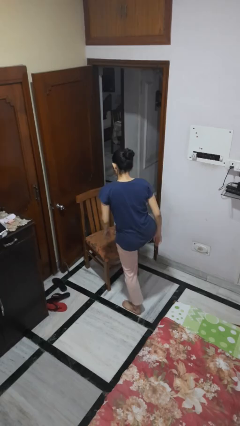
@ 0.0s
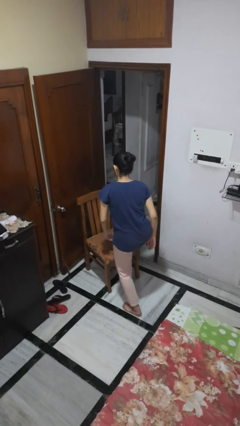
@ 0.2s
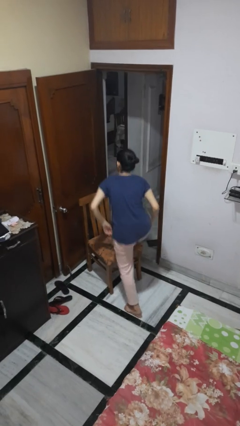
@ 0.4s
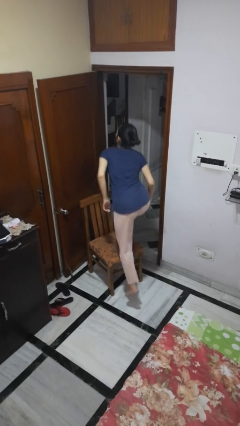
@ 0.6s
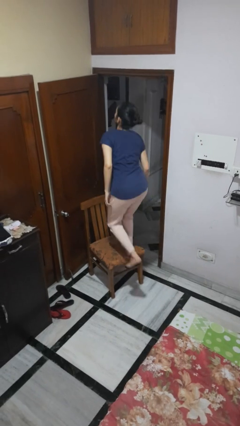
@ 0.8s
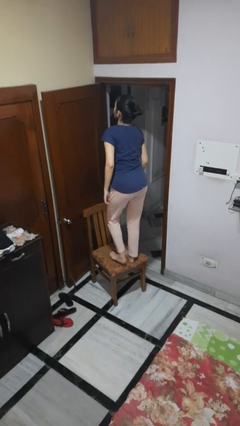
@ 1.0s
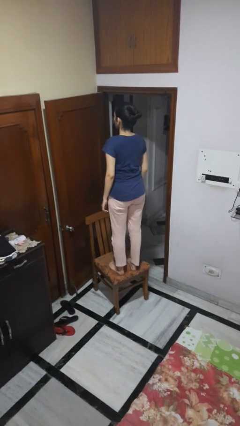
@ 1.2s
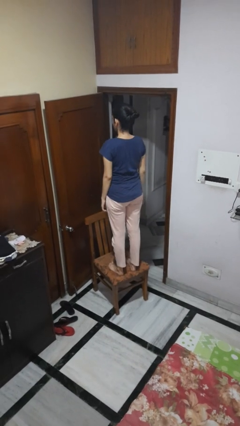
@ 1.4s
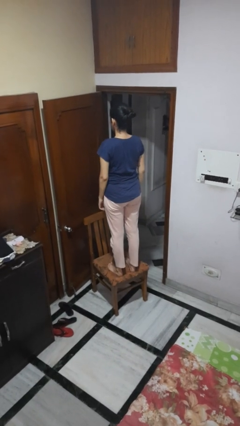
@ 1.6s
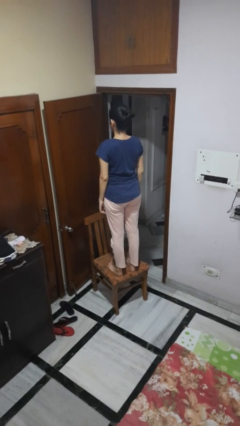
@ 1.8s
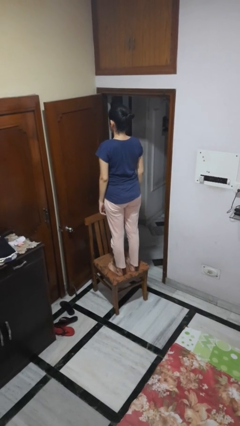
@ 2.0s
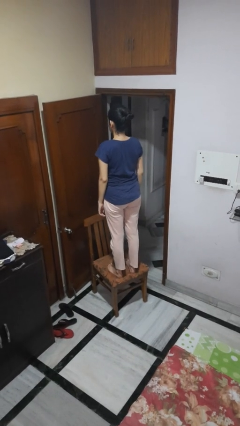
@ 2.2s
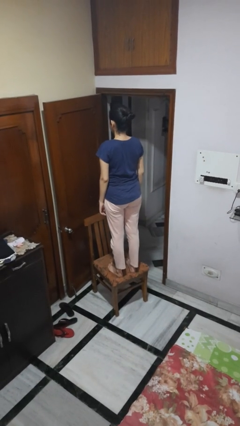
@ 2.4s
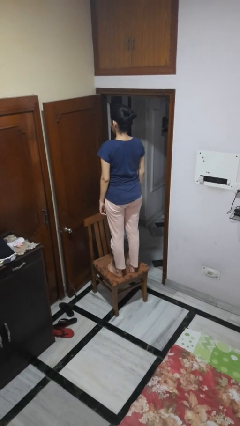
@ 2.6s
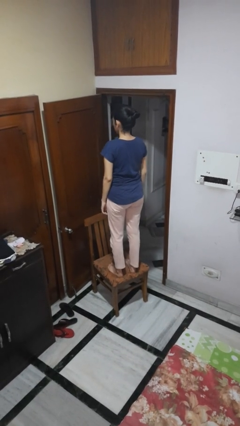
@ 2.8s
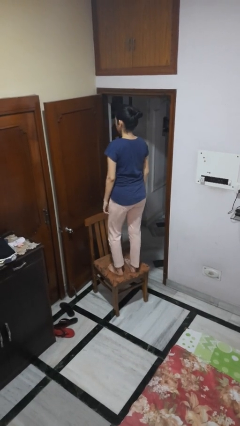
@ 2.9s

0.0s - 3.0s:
person climbs on chair

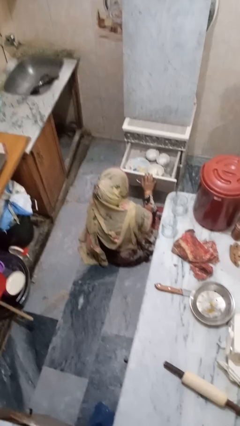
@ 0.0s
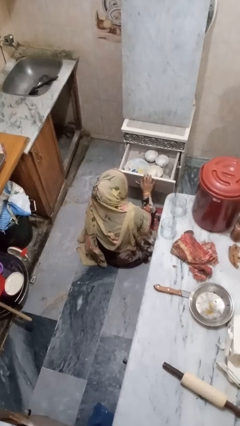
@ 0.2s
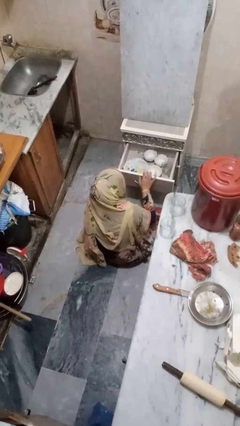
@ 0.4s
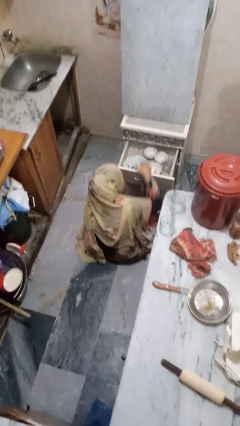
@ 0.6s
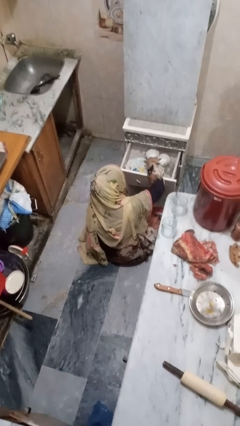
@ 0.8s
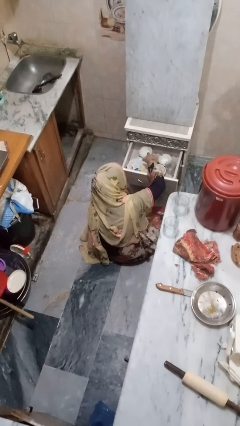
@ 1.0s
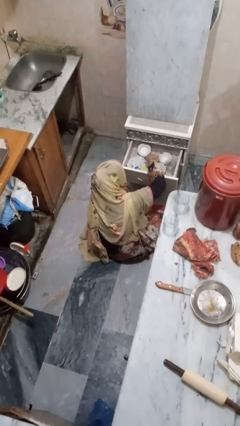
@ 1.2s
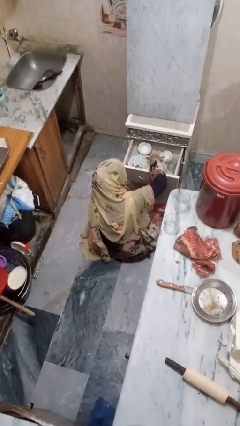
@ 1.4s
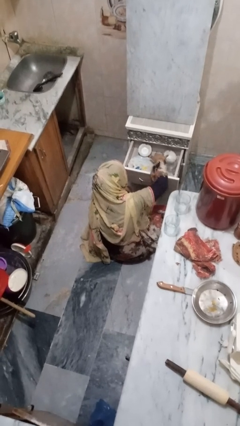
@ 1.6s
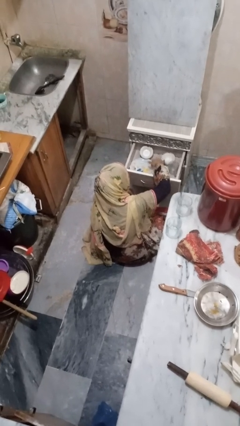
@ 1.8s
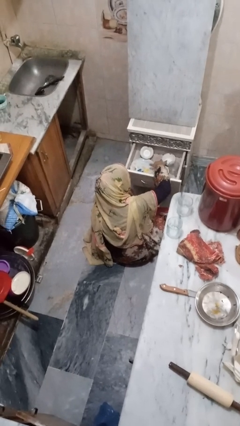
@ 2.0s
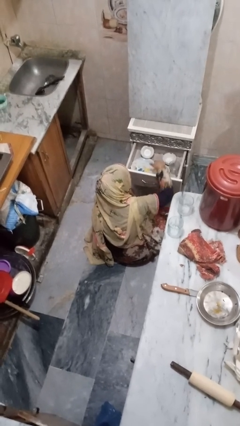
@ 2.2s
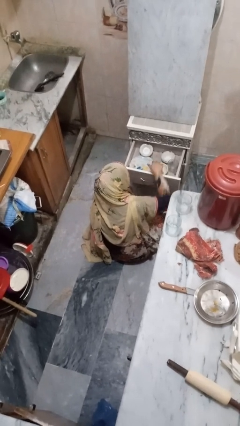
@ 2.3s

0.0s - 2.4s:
person searches in kitchen drawer

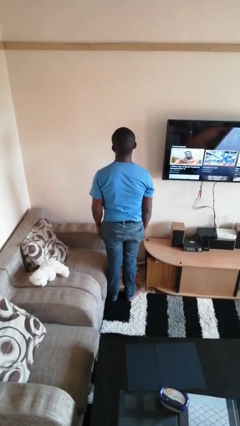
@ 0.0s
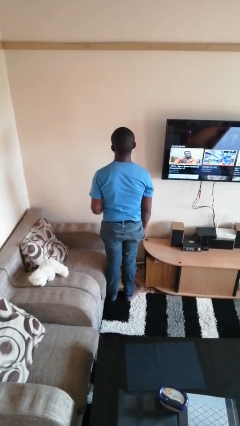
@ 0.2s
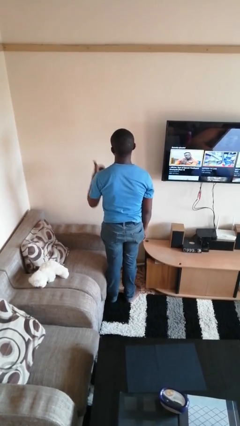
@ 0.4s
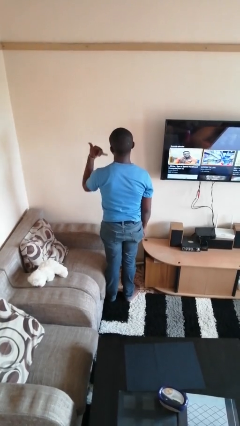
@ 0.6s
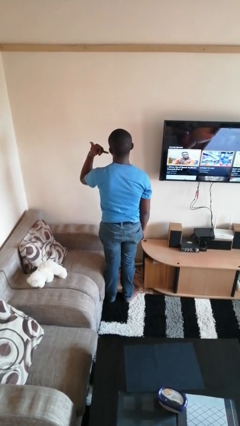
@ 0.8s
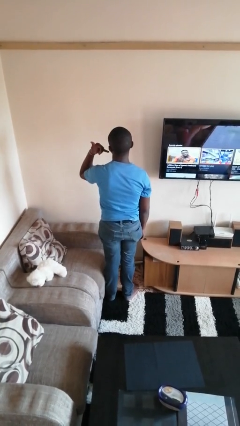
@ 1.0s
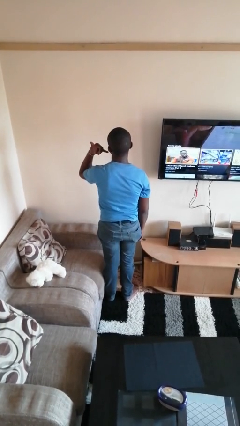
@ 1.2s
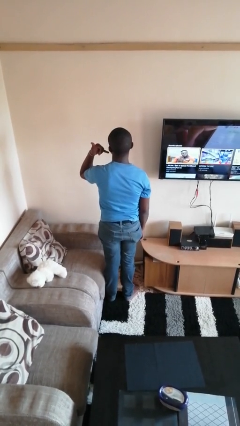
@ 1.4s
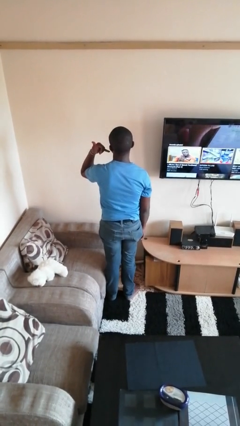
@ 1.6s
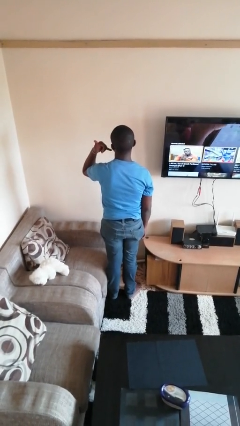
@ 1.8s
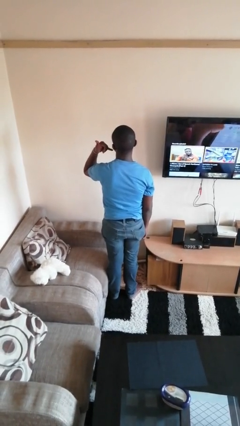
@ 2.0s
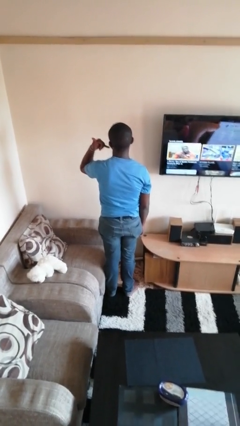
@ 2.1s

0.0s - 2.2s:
person gestures call me

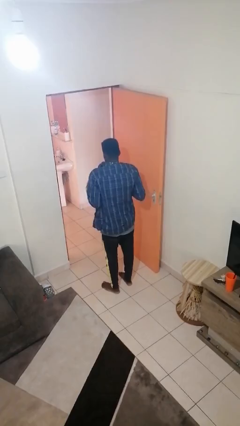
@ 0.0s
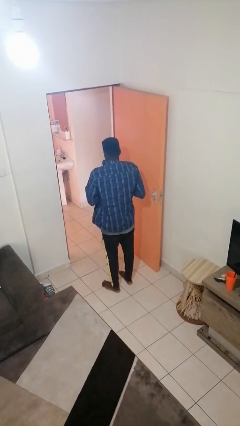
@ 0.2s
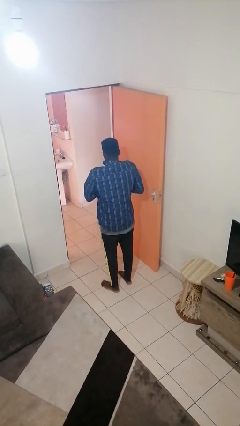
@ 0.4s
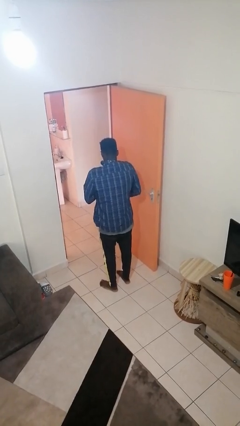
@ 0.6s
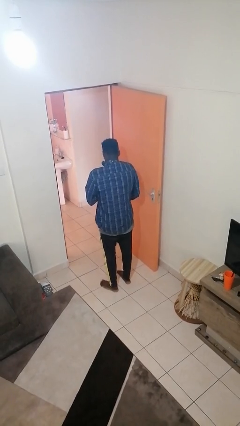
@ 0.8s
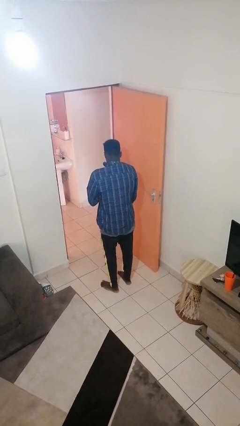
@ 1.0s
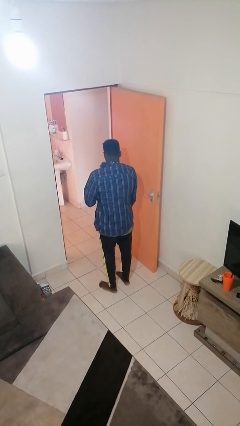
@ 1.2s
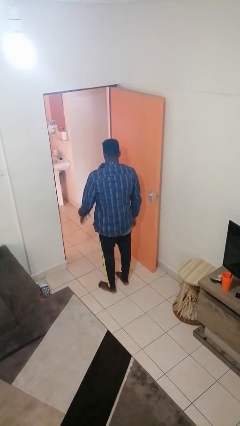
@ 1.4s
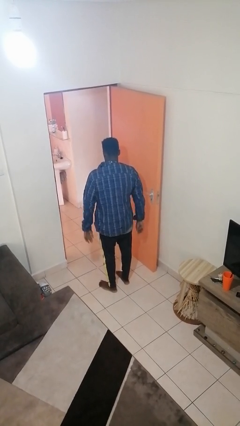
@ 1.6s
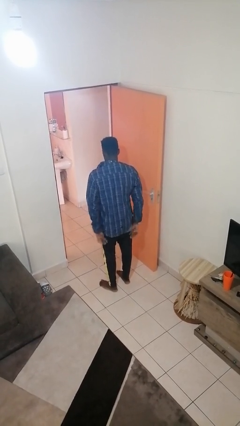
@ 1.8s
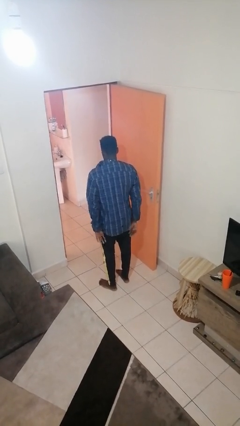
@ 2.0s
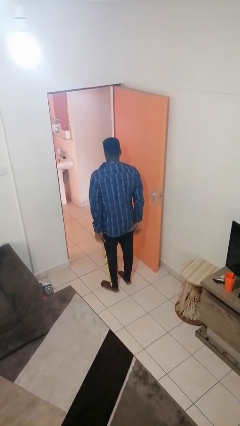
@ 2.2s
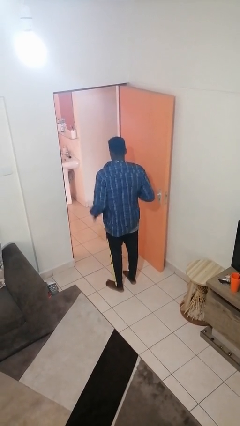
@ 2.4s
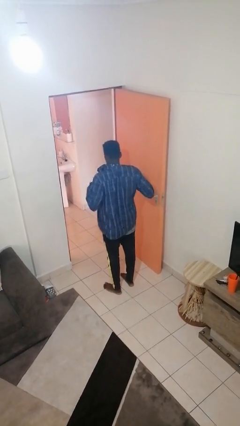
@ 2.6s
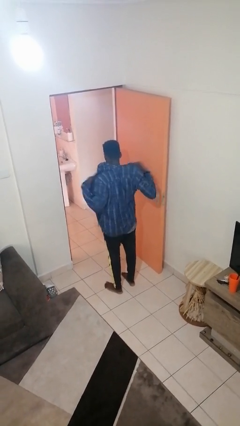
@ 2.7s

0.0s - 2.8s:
person unzips jacket

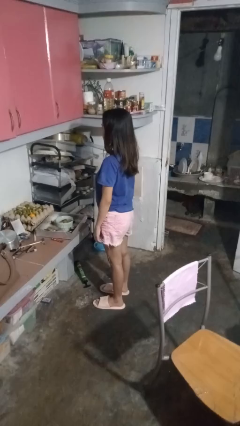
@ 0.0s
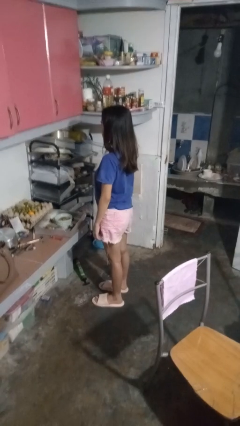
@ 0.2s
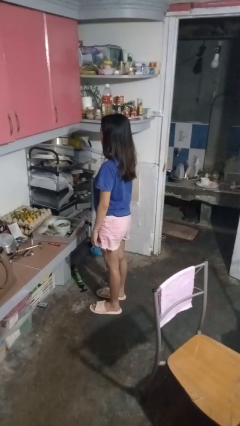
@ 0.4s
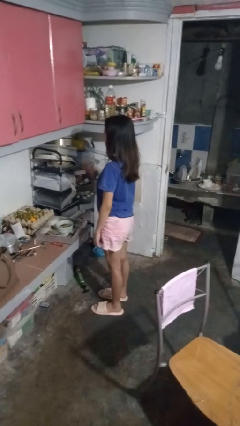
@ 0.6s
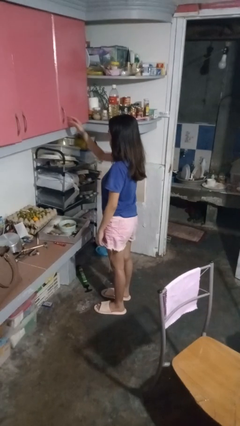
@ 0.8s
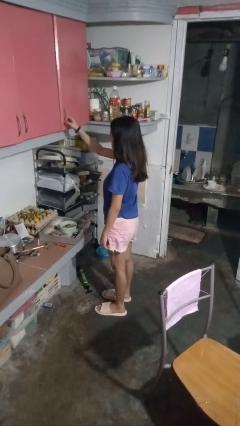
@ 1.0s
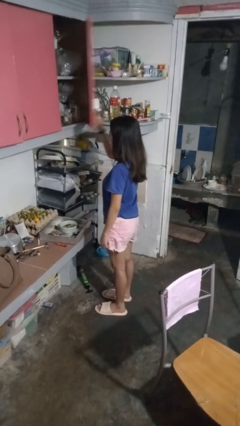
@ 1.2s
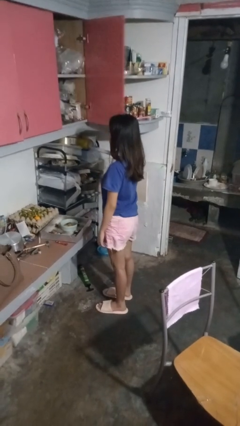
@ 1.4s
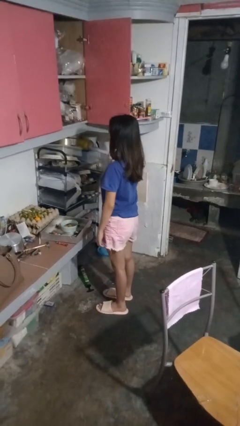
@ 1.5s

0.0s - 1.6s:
person opens cabinet

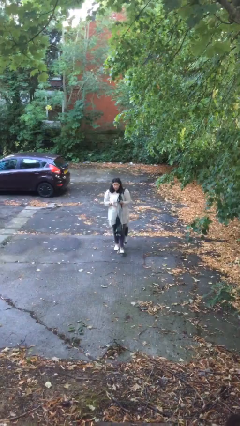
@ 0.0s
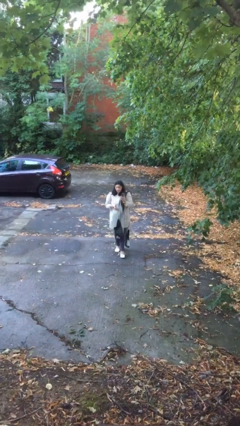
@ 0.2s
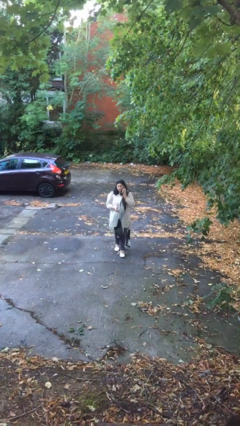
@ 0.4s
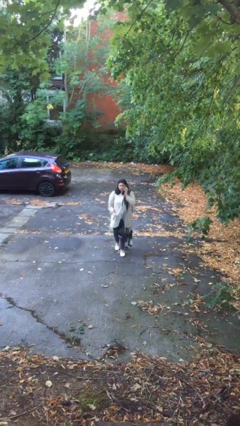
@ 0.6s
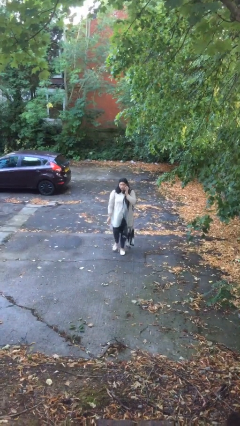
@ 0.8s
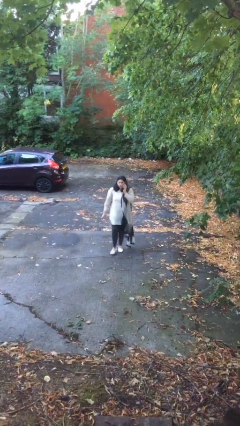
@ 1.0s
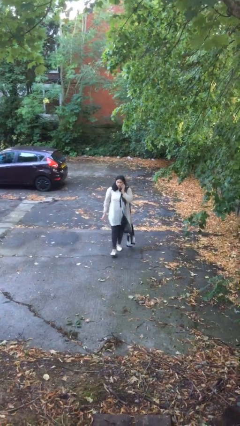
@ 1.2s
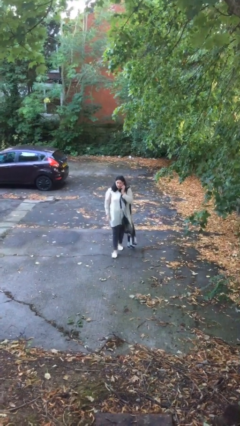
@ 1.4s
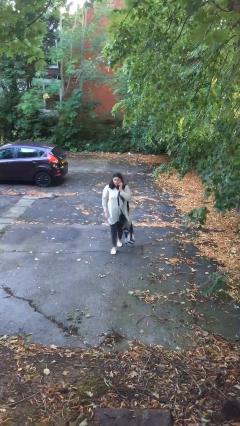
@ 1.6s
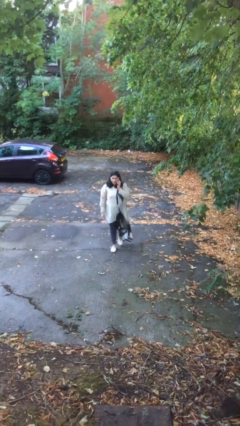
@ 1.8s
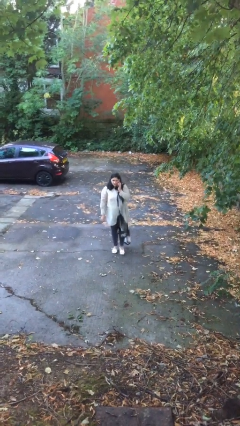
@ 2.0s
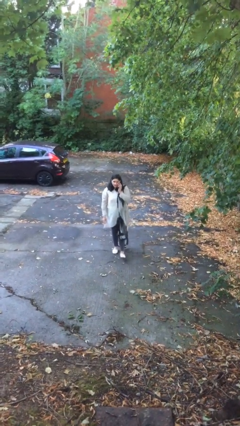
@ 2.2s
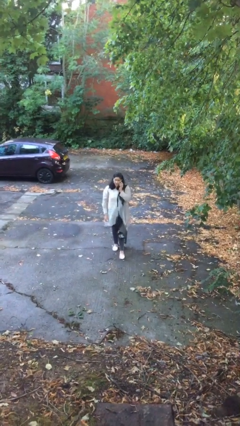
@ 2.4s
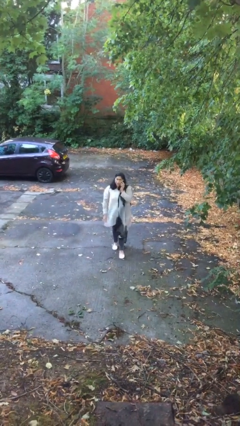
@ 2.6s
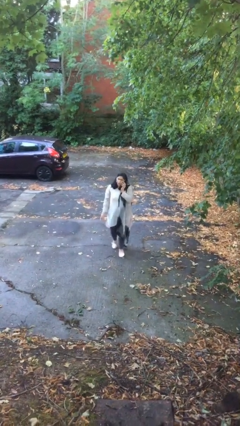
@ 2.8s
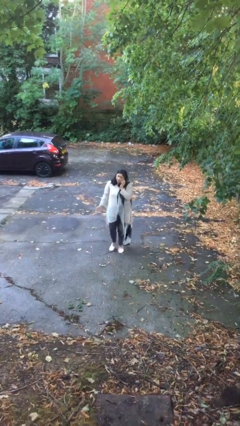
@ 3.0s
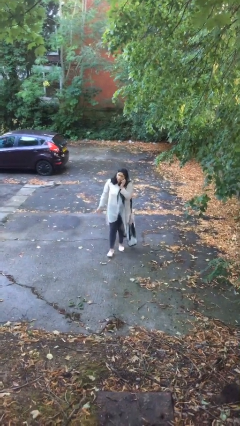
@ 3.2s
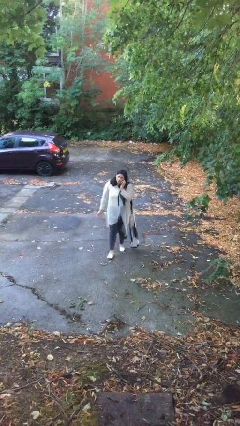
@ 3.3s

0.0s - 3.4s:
person talks on phone

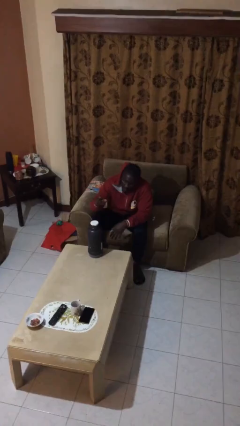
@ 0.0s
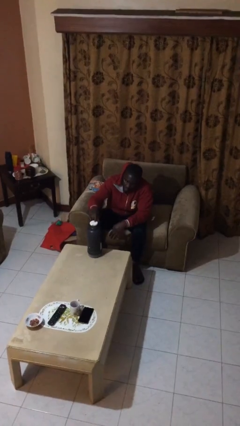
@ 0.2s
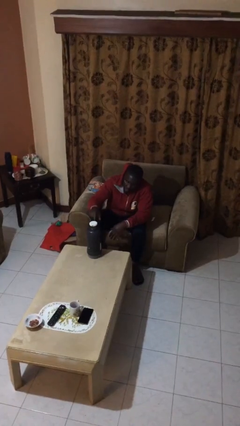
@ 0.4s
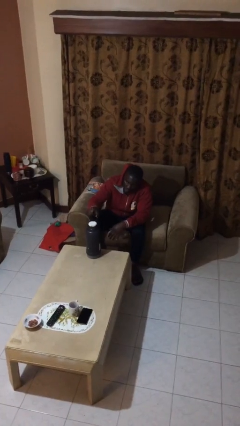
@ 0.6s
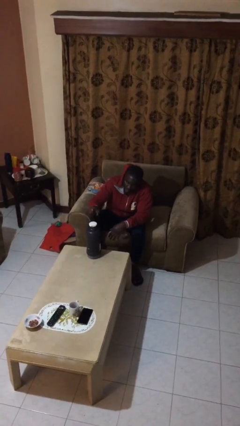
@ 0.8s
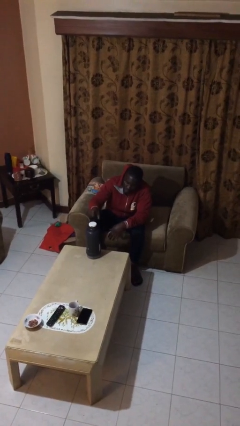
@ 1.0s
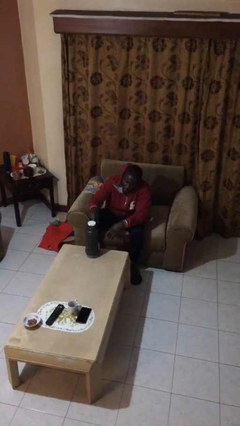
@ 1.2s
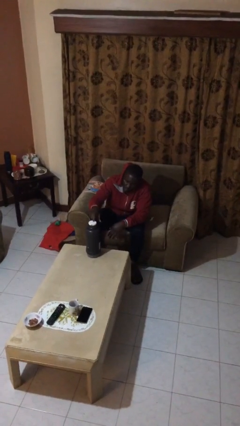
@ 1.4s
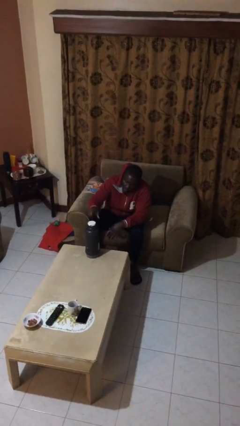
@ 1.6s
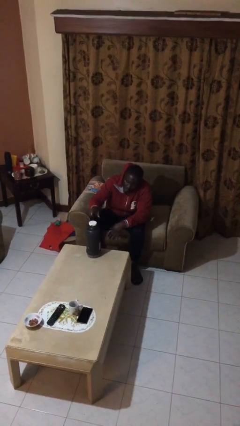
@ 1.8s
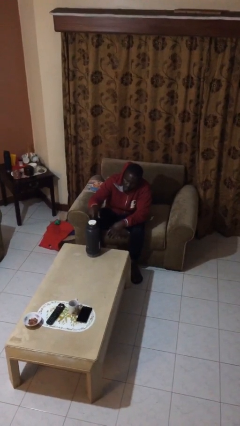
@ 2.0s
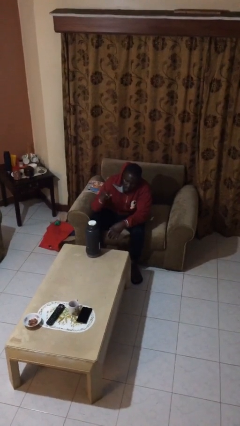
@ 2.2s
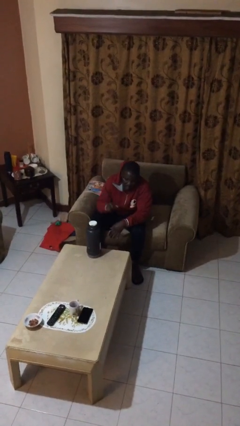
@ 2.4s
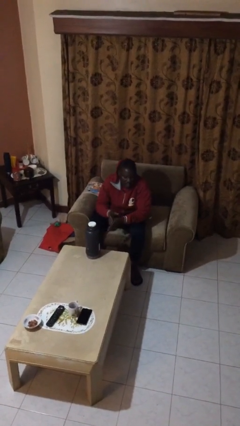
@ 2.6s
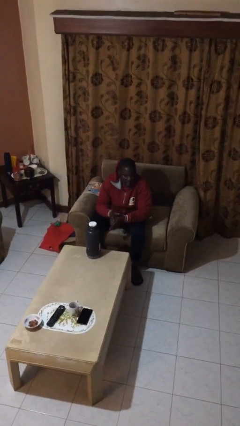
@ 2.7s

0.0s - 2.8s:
person taps object with finger
